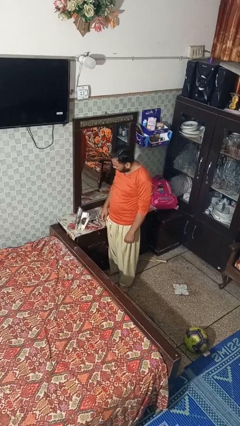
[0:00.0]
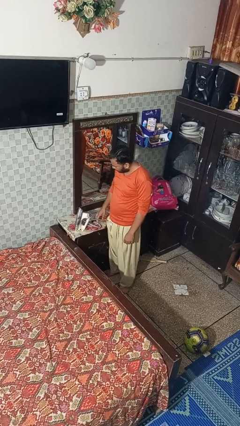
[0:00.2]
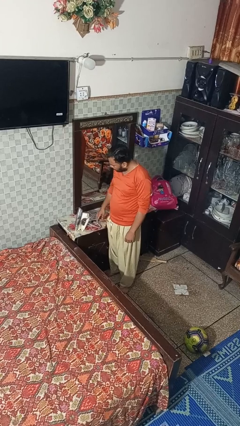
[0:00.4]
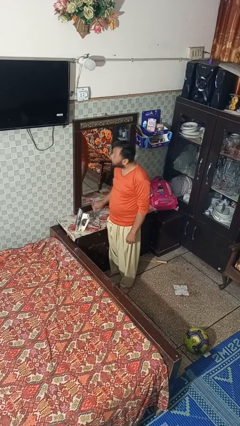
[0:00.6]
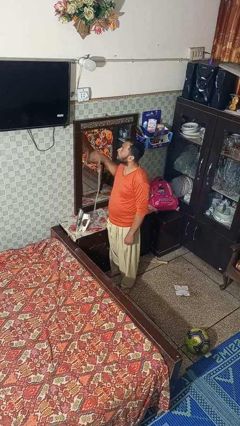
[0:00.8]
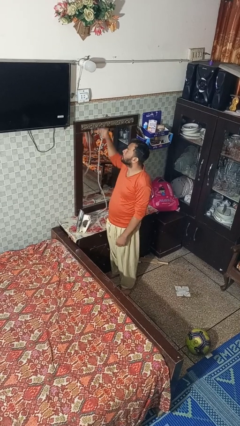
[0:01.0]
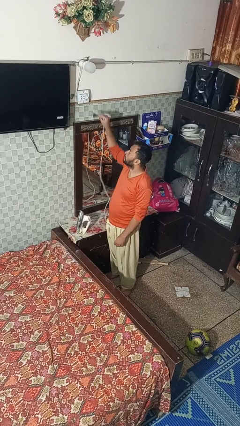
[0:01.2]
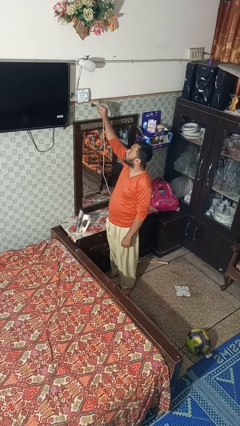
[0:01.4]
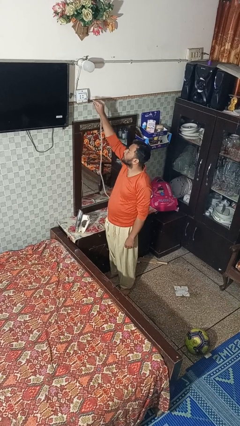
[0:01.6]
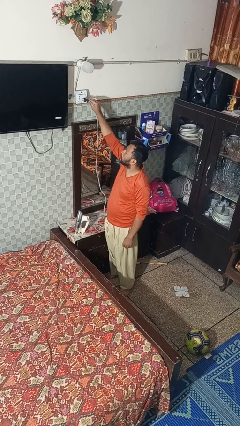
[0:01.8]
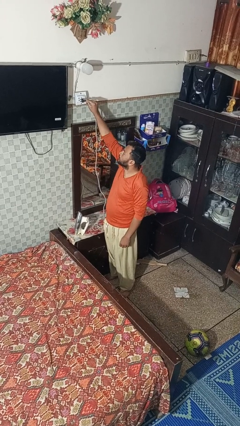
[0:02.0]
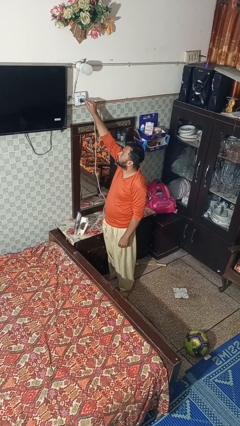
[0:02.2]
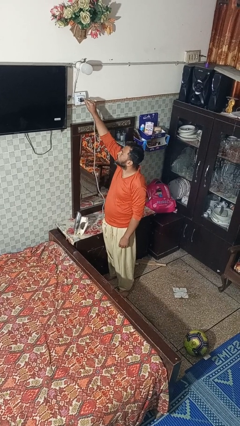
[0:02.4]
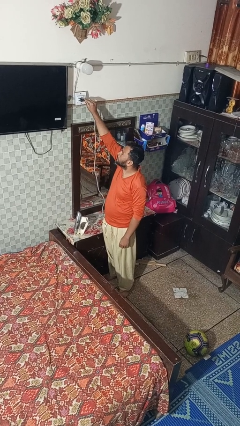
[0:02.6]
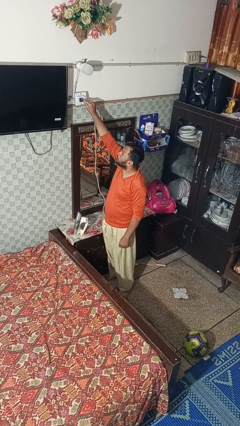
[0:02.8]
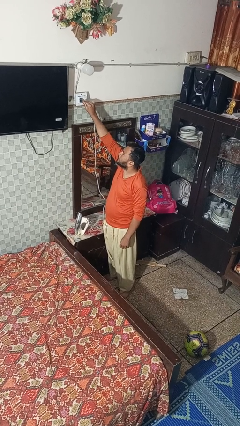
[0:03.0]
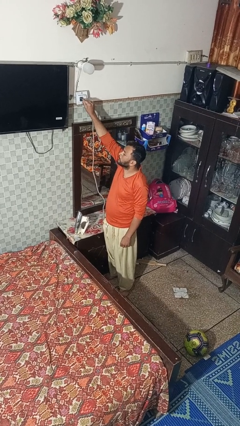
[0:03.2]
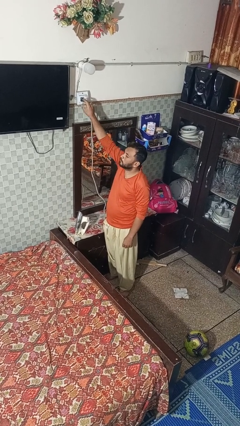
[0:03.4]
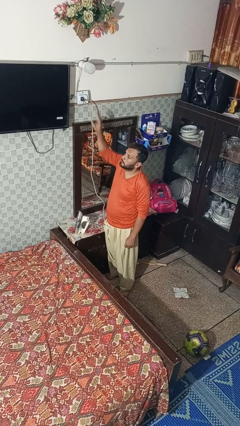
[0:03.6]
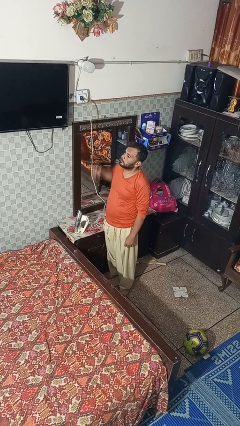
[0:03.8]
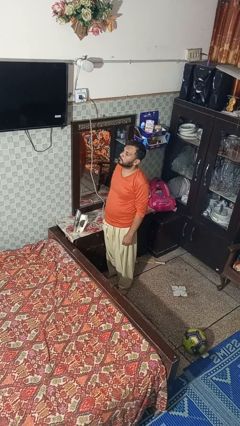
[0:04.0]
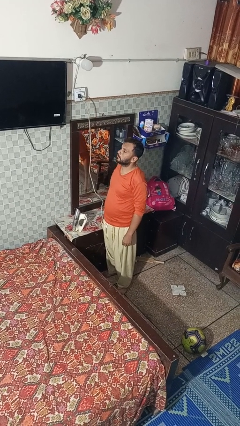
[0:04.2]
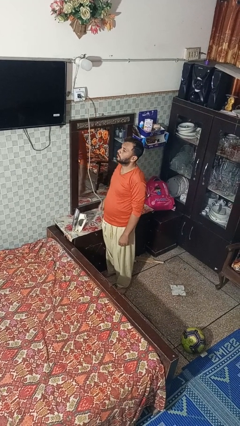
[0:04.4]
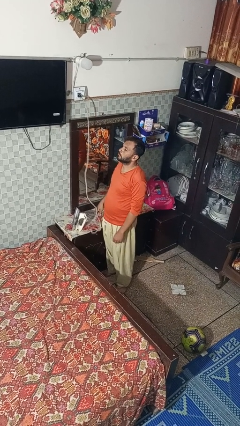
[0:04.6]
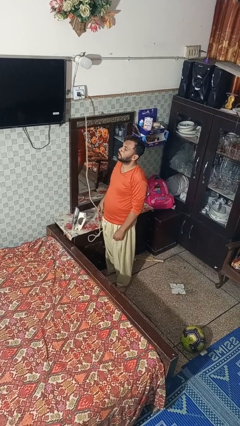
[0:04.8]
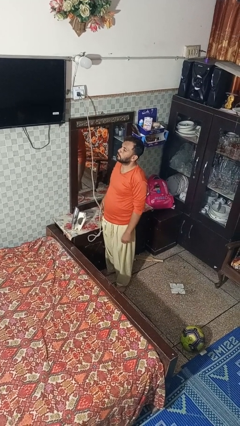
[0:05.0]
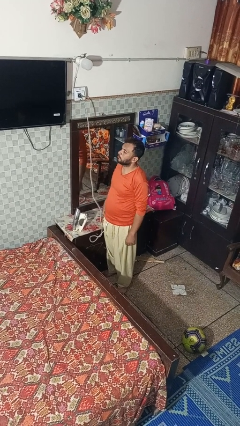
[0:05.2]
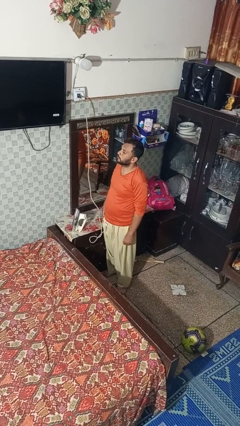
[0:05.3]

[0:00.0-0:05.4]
person plugs into electrical socket

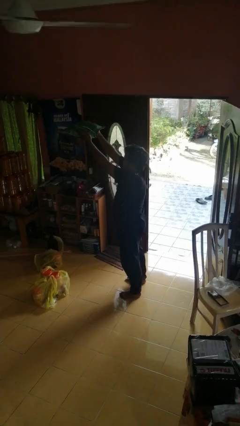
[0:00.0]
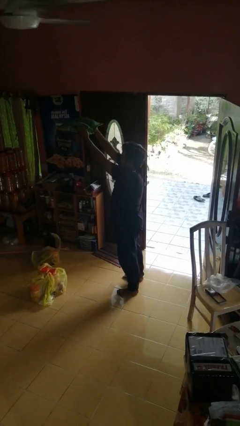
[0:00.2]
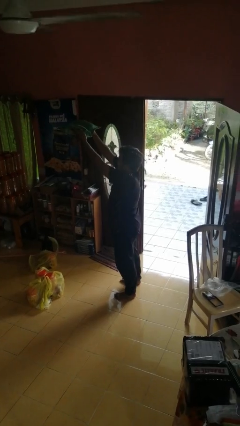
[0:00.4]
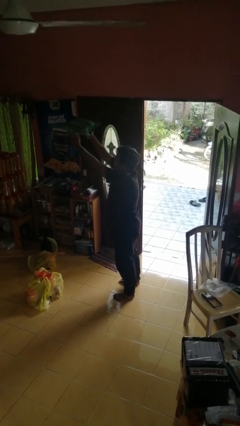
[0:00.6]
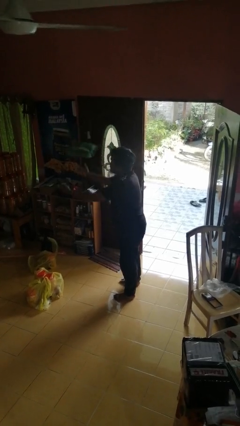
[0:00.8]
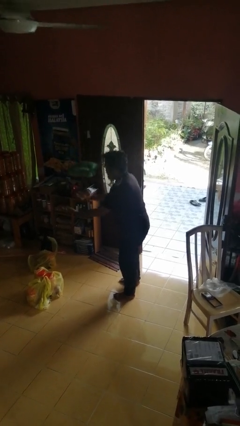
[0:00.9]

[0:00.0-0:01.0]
person drops object

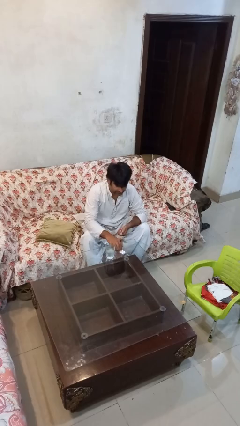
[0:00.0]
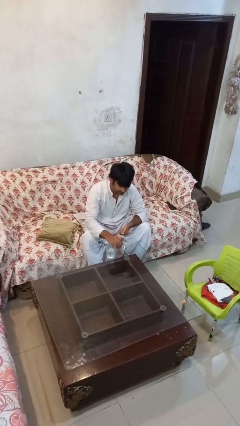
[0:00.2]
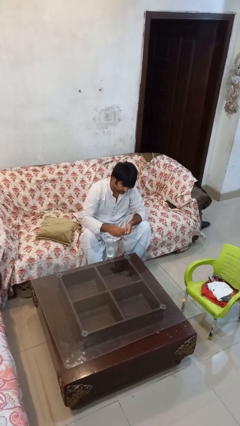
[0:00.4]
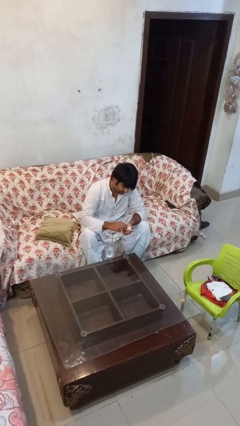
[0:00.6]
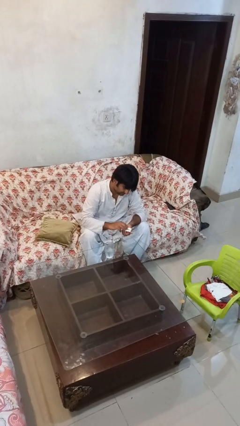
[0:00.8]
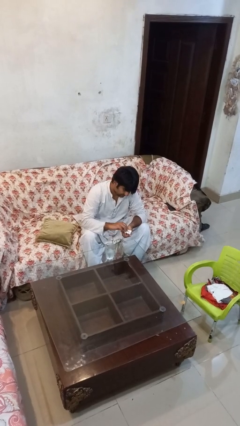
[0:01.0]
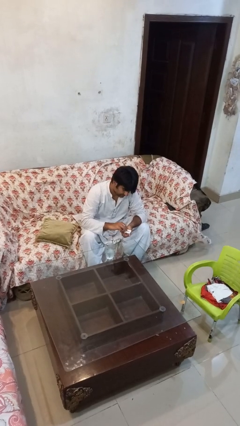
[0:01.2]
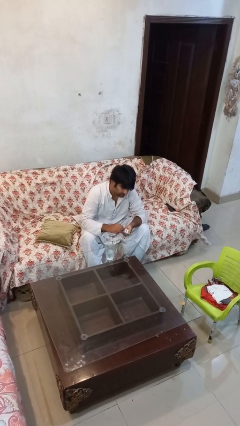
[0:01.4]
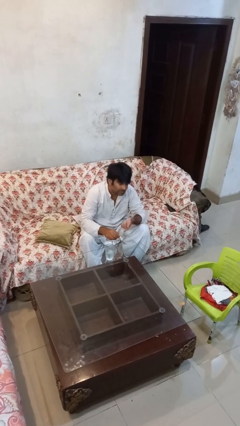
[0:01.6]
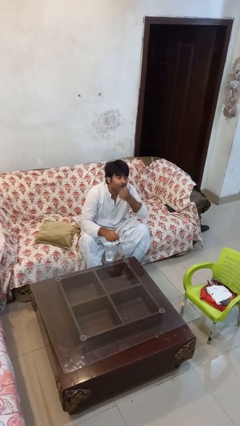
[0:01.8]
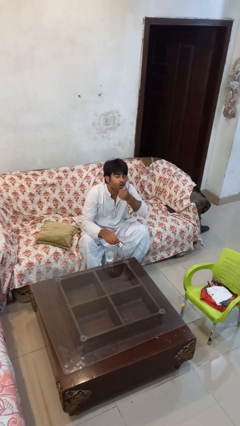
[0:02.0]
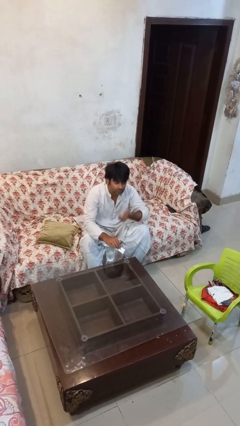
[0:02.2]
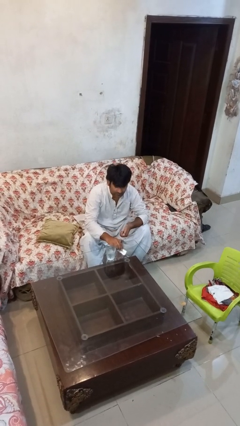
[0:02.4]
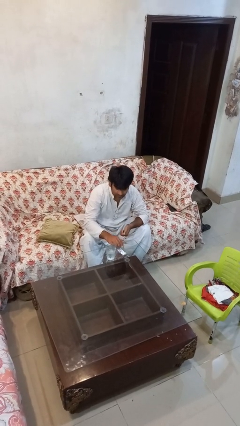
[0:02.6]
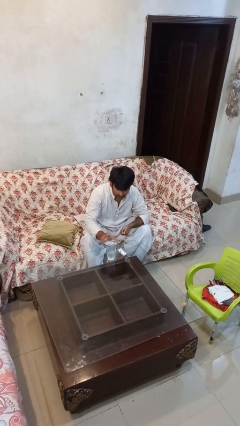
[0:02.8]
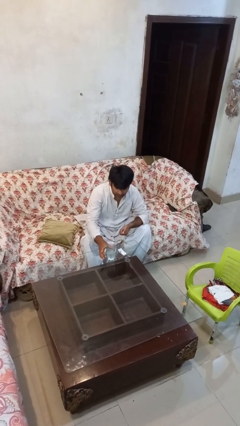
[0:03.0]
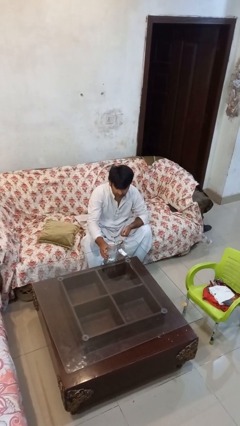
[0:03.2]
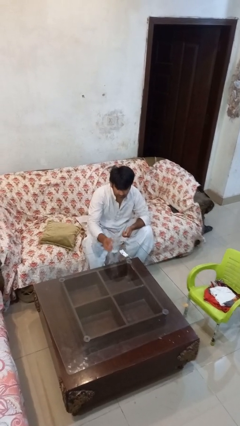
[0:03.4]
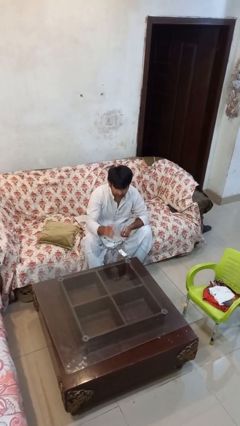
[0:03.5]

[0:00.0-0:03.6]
person takes medicine pills

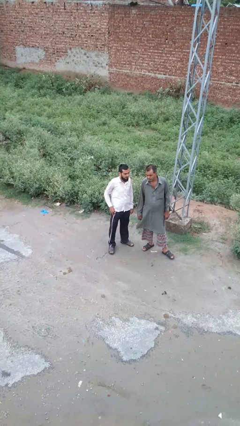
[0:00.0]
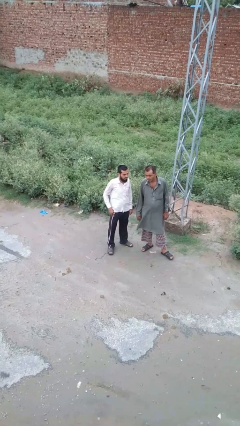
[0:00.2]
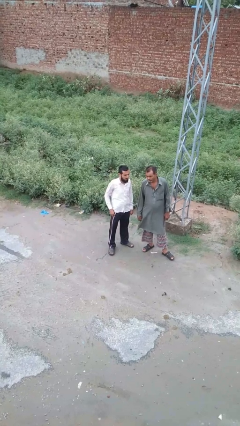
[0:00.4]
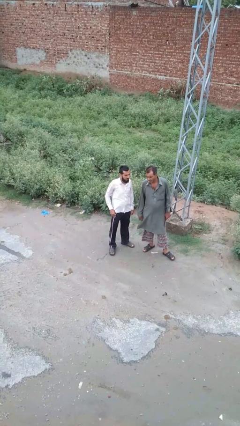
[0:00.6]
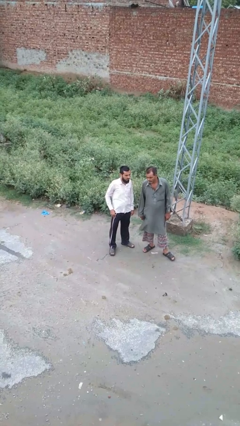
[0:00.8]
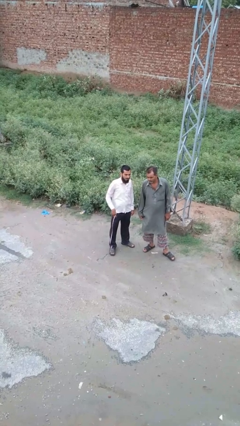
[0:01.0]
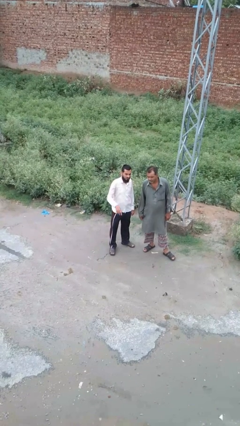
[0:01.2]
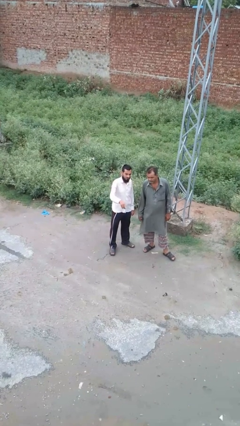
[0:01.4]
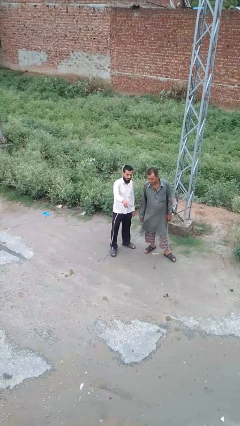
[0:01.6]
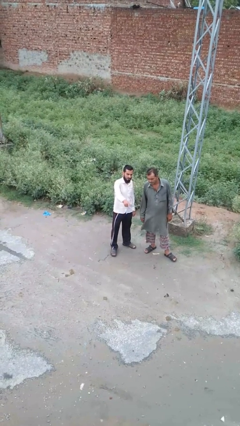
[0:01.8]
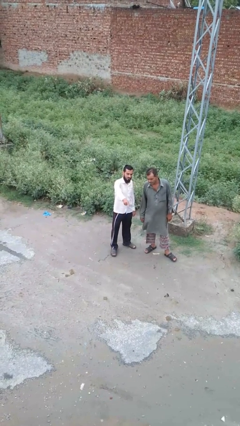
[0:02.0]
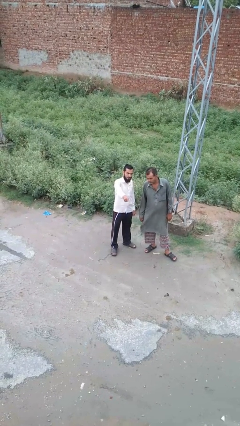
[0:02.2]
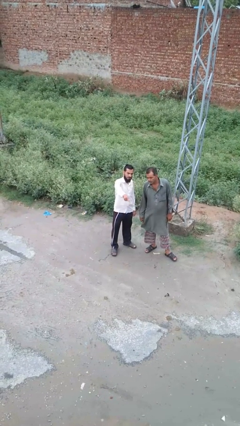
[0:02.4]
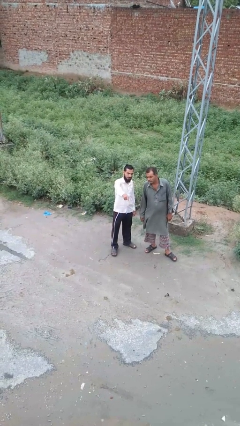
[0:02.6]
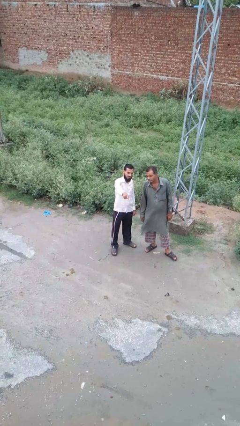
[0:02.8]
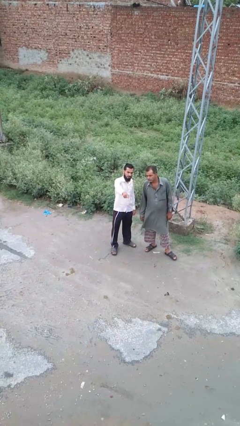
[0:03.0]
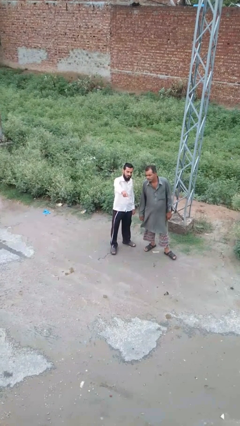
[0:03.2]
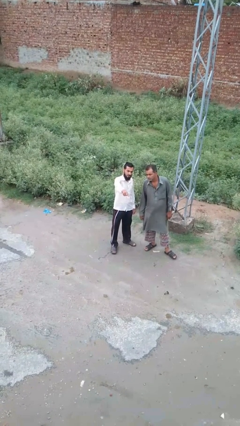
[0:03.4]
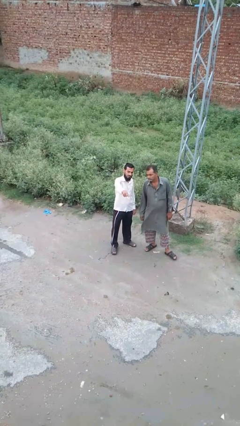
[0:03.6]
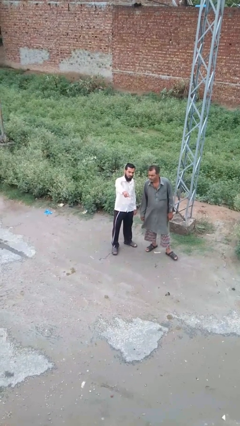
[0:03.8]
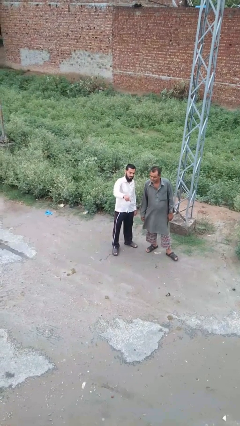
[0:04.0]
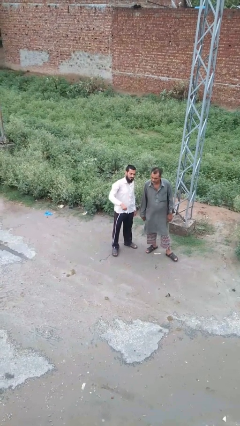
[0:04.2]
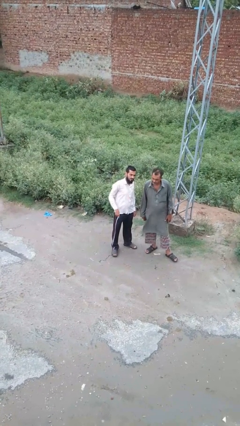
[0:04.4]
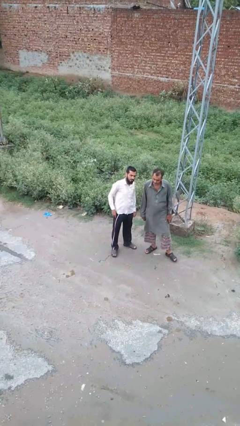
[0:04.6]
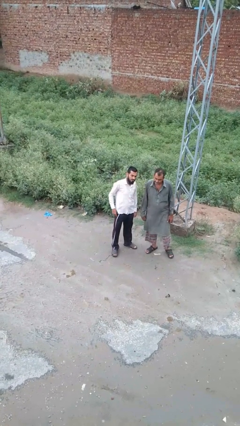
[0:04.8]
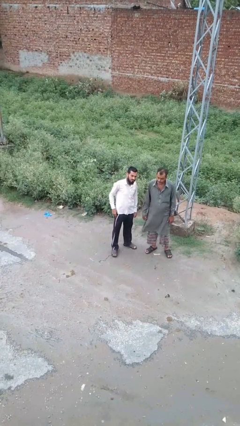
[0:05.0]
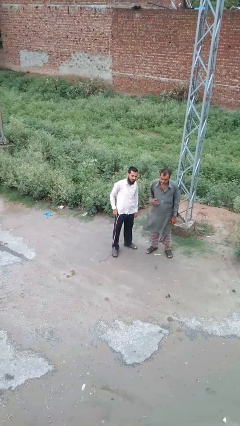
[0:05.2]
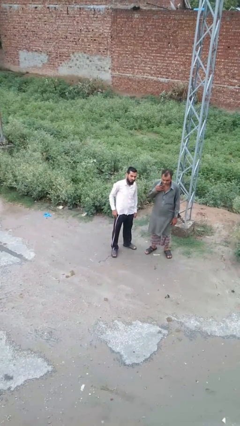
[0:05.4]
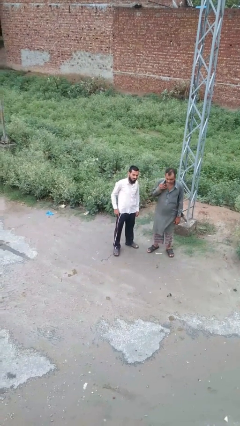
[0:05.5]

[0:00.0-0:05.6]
person points at person

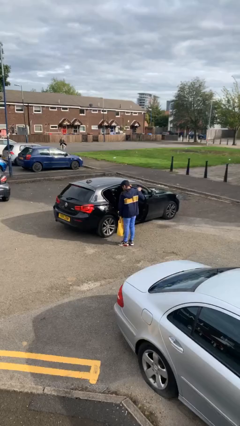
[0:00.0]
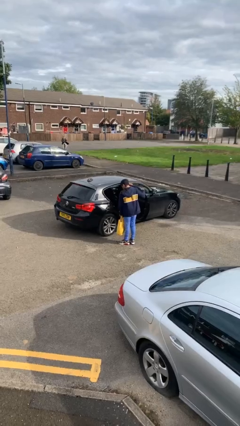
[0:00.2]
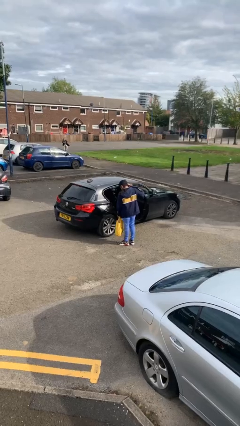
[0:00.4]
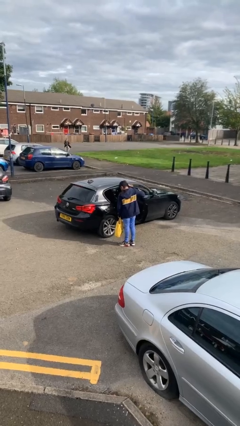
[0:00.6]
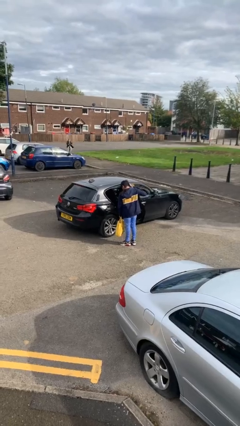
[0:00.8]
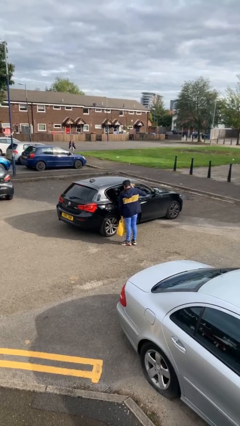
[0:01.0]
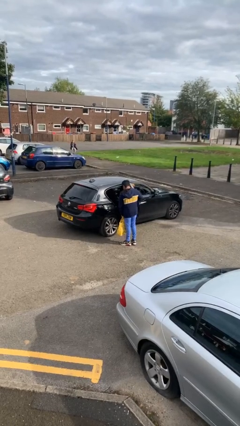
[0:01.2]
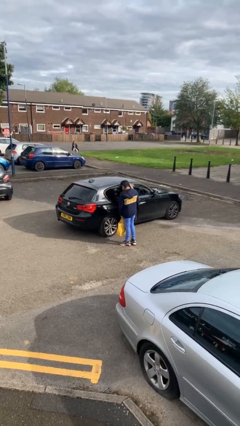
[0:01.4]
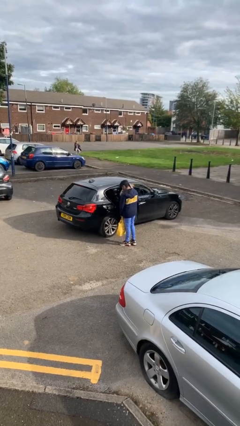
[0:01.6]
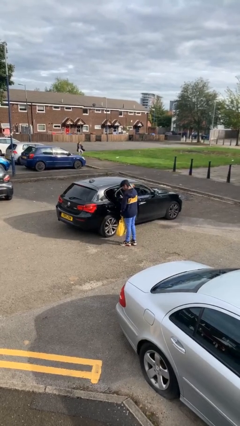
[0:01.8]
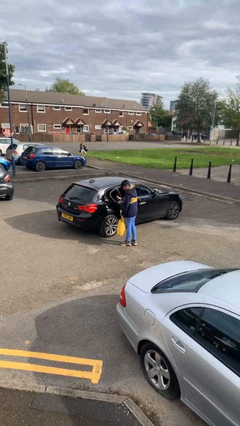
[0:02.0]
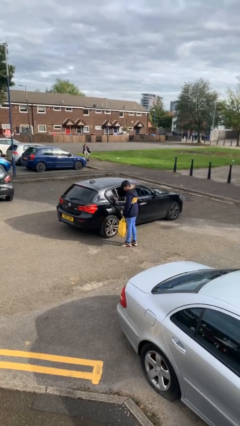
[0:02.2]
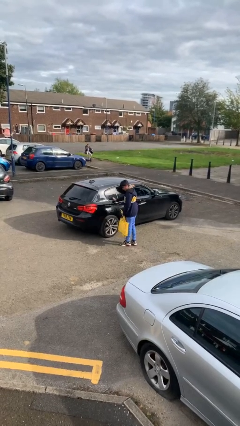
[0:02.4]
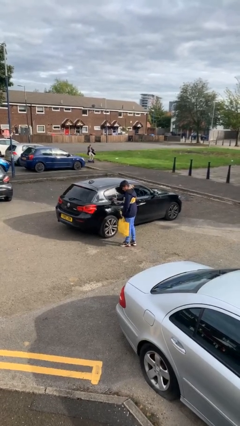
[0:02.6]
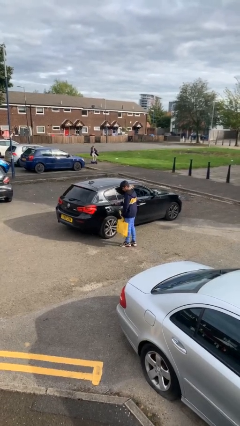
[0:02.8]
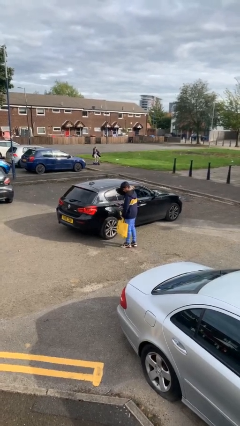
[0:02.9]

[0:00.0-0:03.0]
person closes car door
